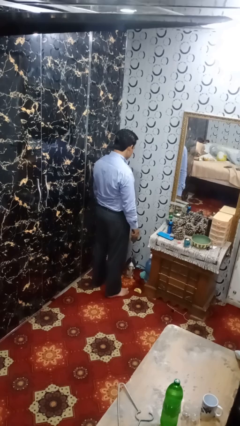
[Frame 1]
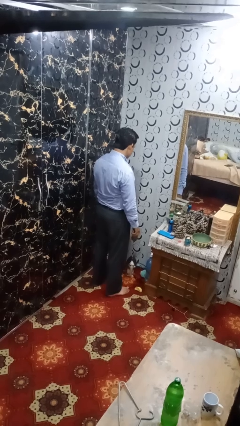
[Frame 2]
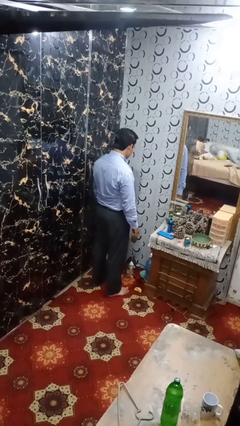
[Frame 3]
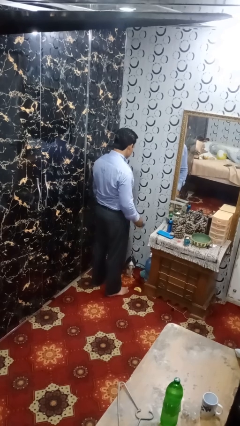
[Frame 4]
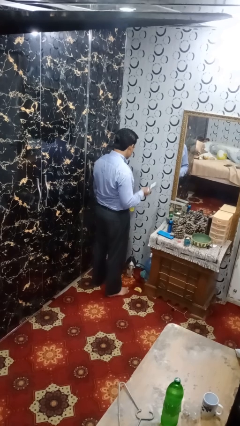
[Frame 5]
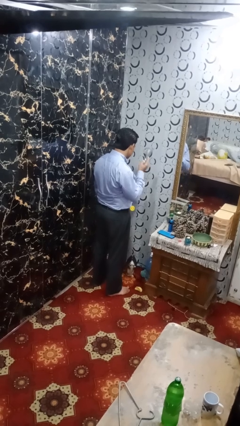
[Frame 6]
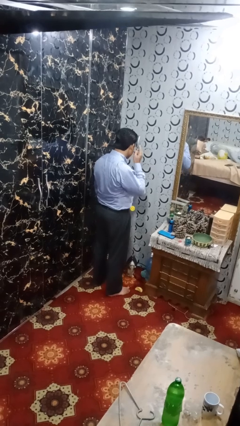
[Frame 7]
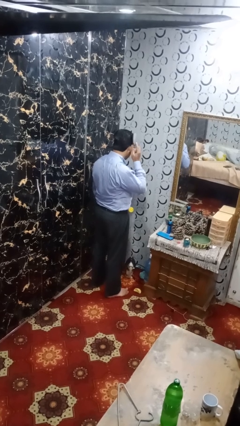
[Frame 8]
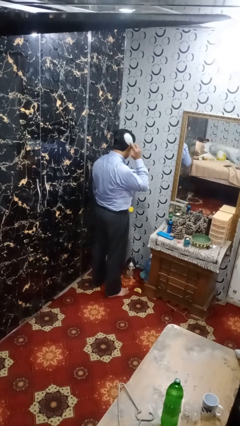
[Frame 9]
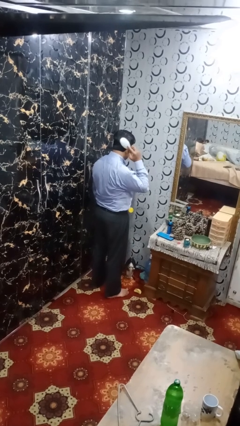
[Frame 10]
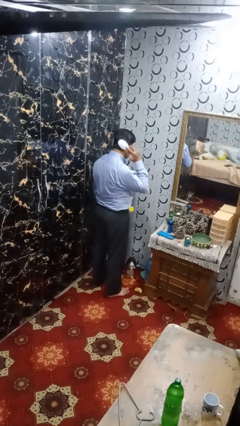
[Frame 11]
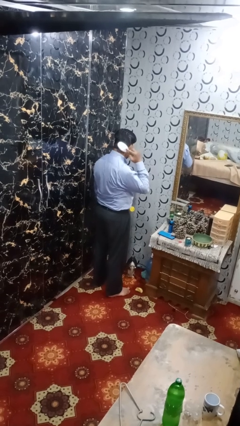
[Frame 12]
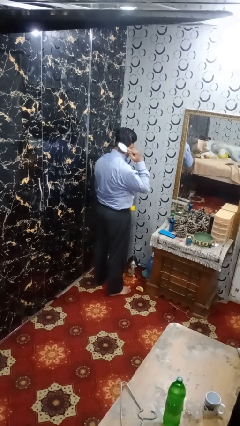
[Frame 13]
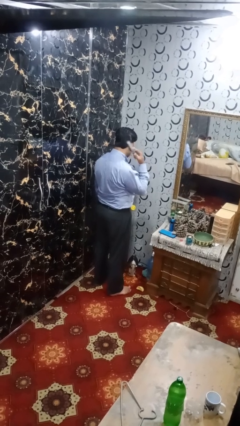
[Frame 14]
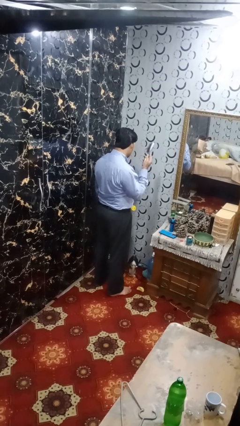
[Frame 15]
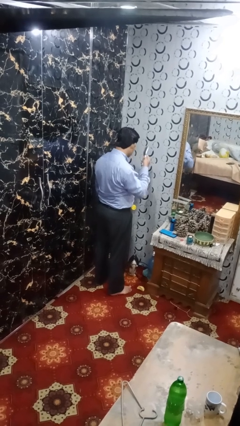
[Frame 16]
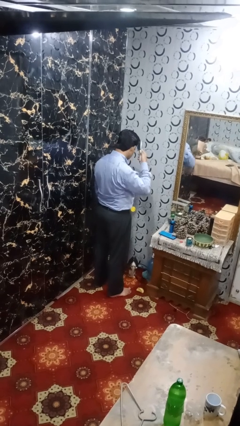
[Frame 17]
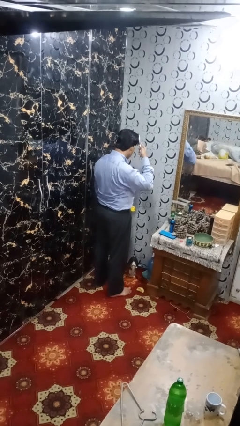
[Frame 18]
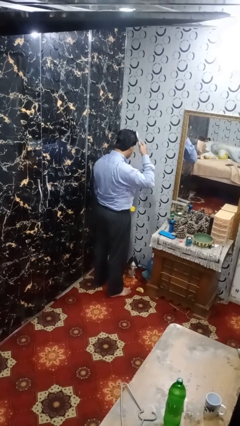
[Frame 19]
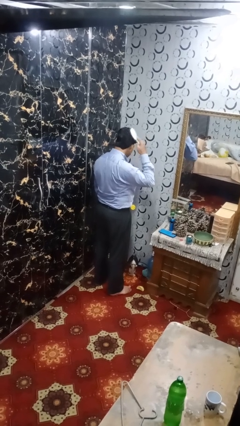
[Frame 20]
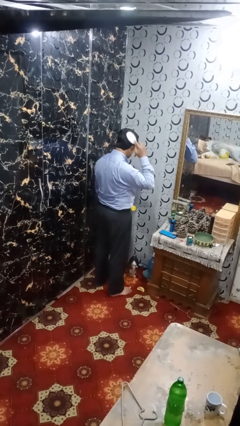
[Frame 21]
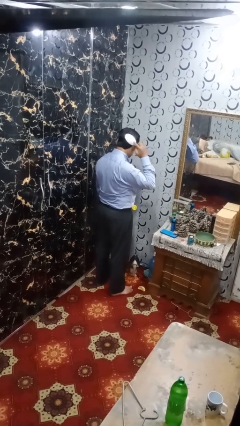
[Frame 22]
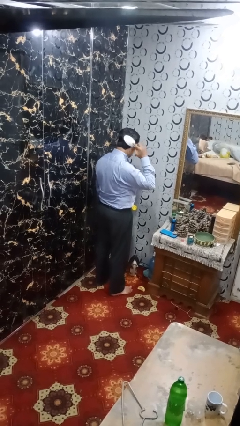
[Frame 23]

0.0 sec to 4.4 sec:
person brushes hair

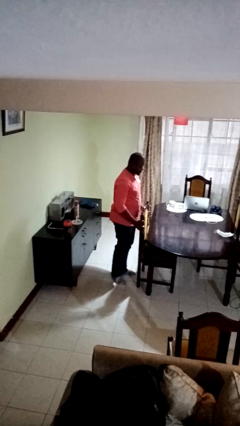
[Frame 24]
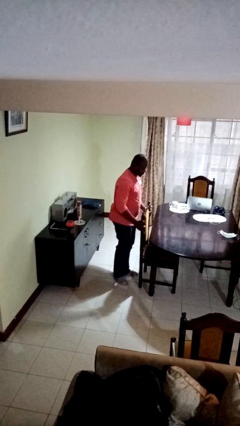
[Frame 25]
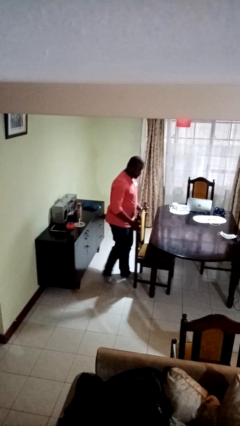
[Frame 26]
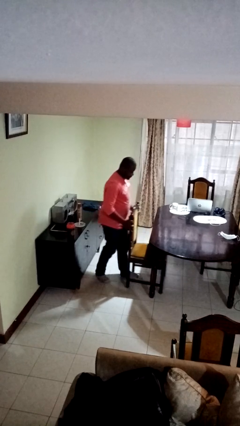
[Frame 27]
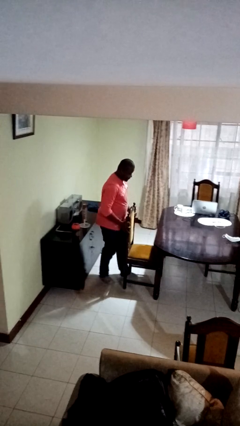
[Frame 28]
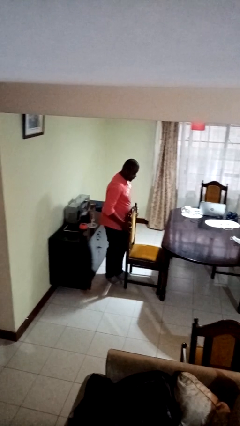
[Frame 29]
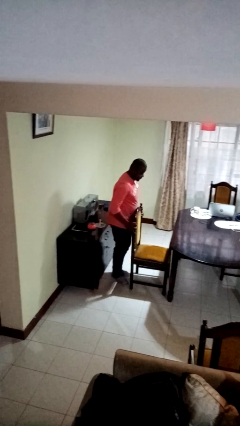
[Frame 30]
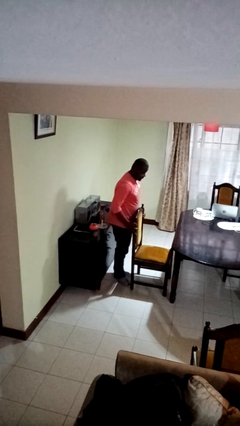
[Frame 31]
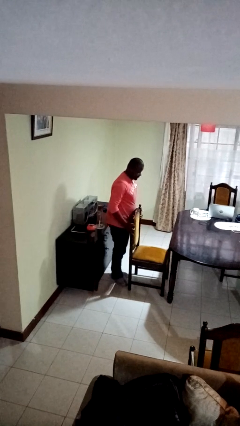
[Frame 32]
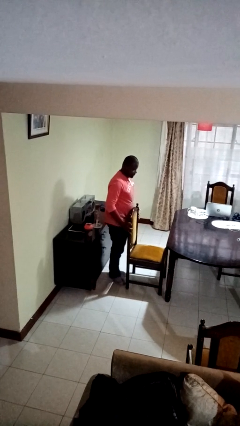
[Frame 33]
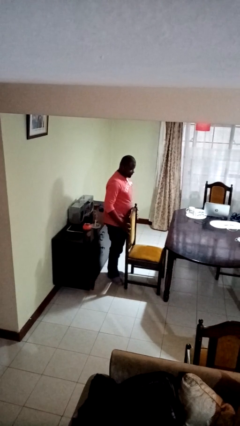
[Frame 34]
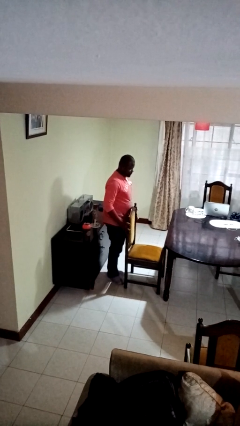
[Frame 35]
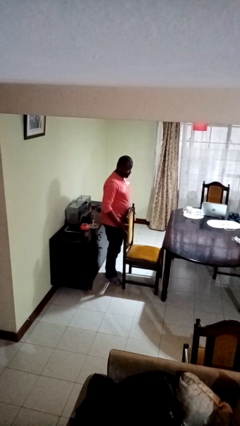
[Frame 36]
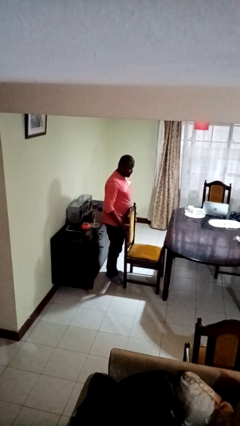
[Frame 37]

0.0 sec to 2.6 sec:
person pulls out chair

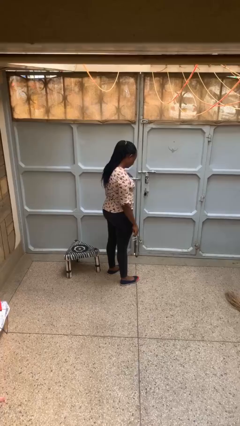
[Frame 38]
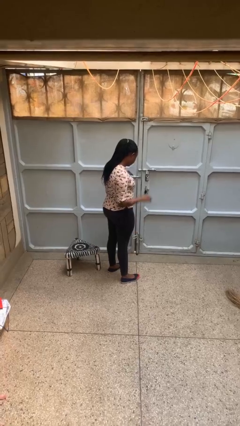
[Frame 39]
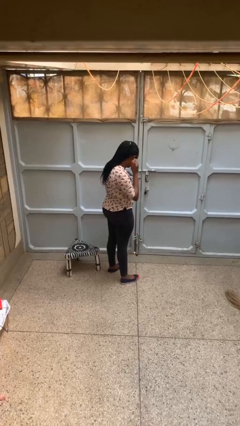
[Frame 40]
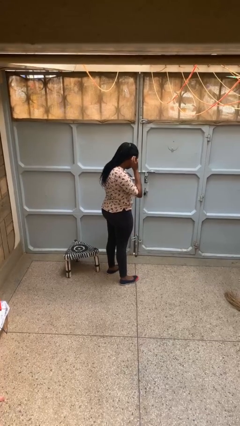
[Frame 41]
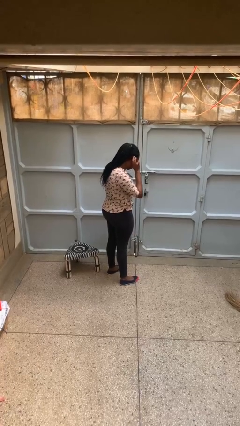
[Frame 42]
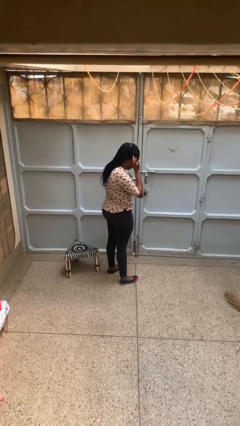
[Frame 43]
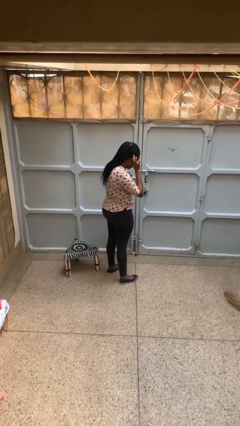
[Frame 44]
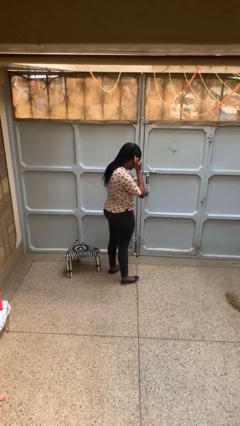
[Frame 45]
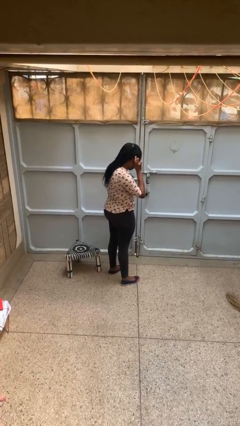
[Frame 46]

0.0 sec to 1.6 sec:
person gestures listen closely

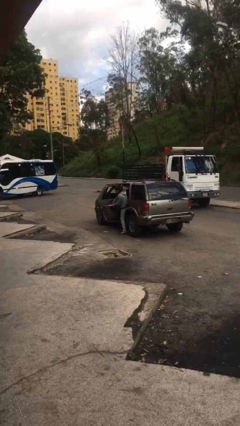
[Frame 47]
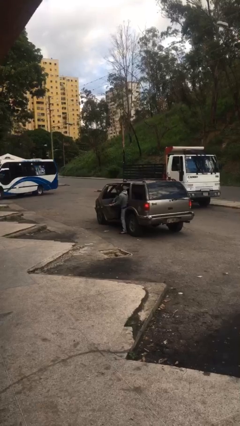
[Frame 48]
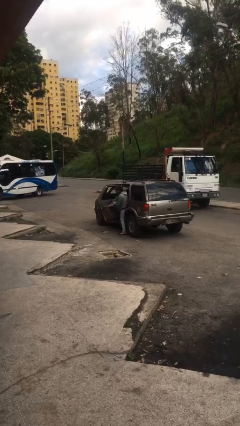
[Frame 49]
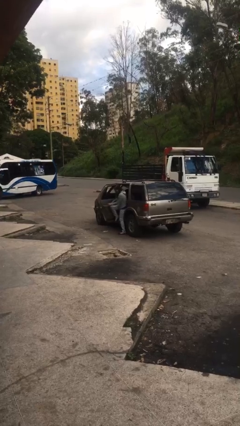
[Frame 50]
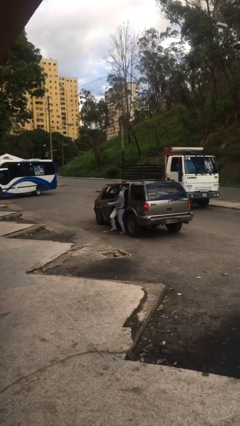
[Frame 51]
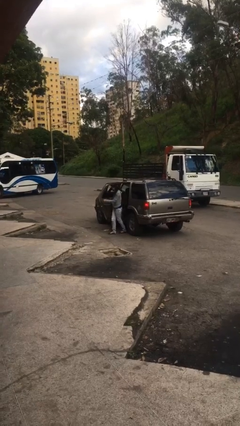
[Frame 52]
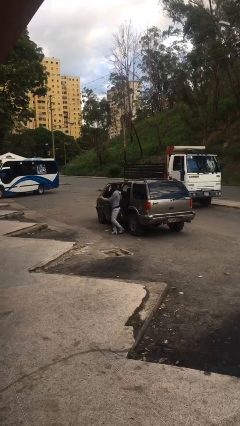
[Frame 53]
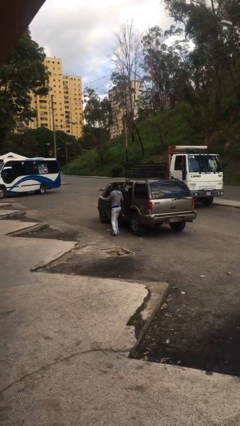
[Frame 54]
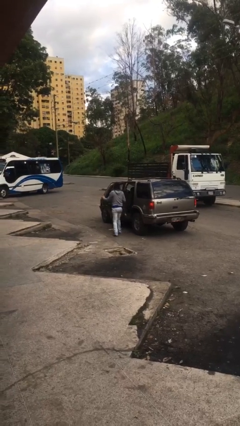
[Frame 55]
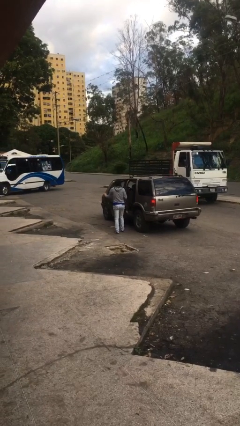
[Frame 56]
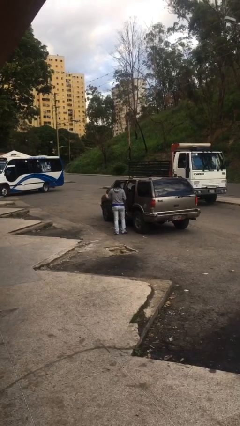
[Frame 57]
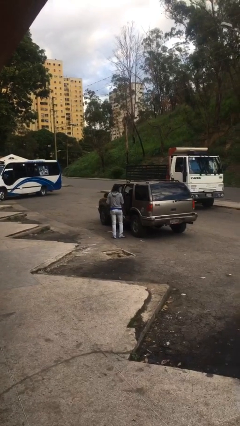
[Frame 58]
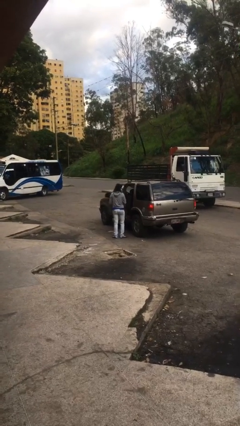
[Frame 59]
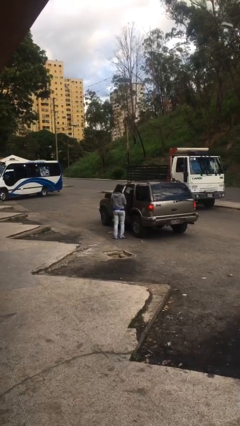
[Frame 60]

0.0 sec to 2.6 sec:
person exits car

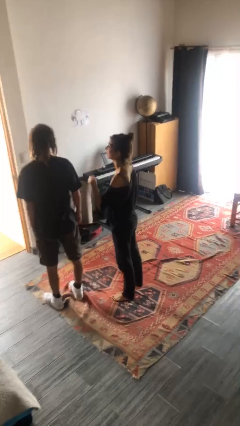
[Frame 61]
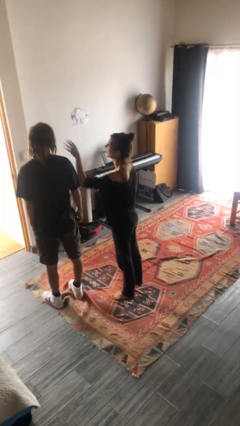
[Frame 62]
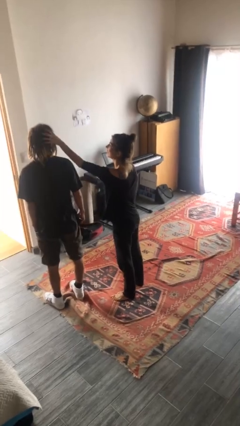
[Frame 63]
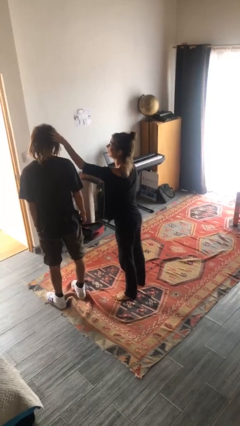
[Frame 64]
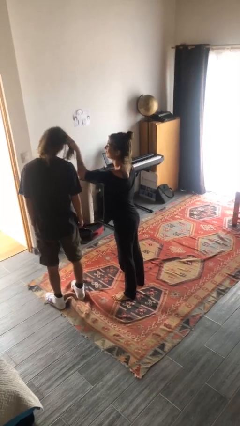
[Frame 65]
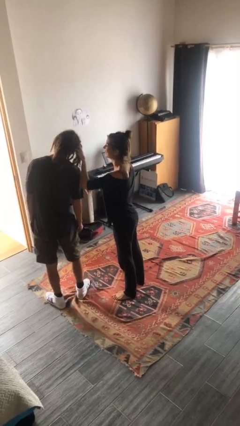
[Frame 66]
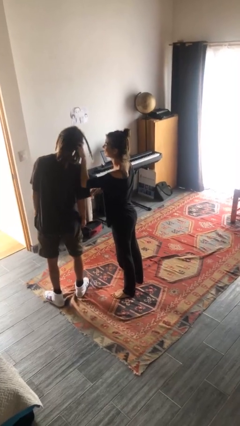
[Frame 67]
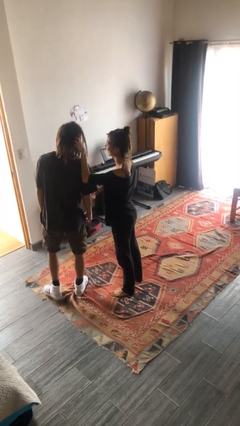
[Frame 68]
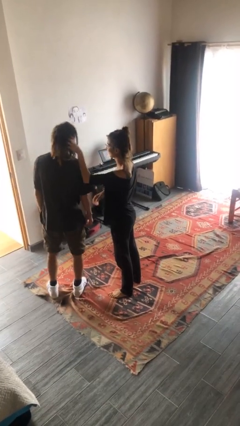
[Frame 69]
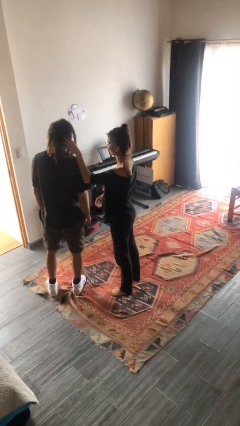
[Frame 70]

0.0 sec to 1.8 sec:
person grabs person by hair

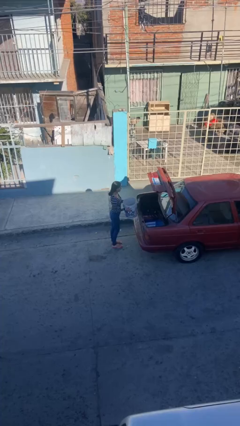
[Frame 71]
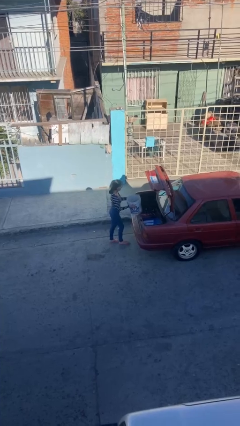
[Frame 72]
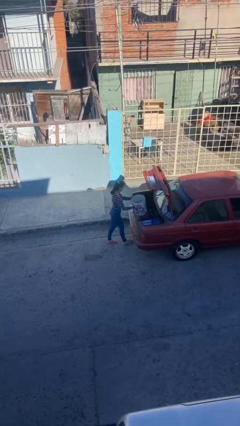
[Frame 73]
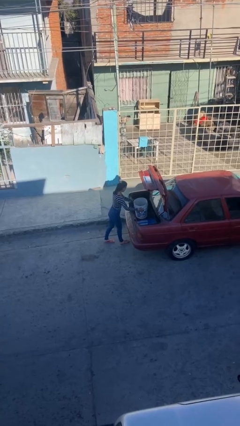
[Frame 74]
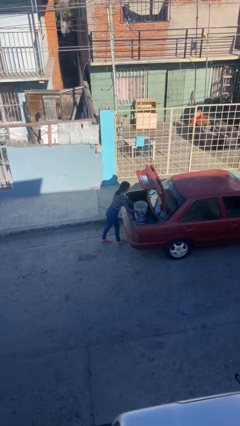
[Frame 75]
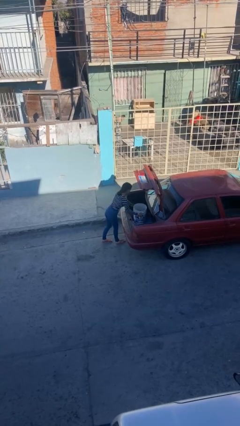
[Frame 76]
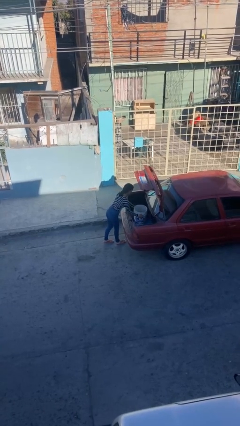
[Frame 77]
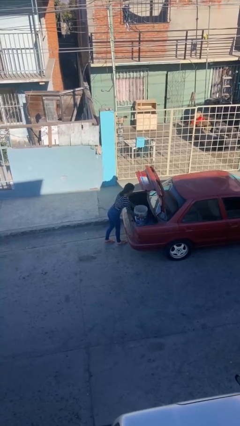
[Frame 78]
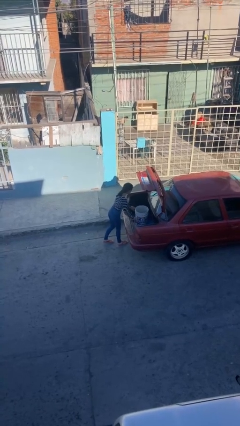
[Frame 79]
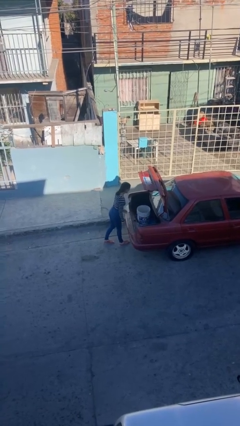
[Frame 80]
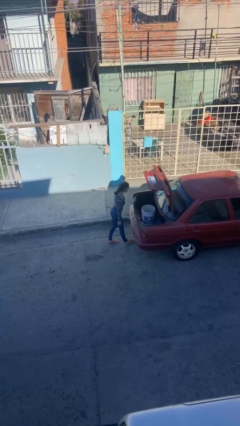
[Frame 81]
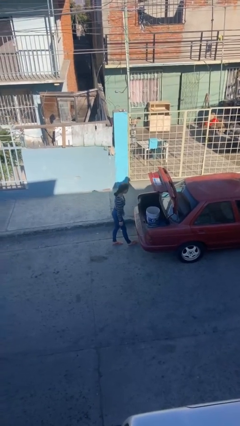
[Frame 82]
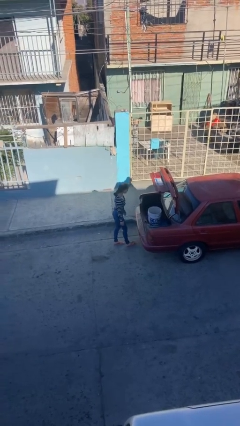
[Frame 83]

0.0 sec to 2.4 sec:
person loads car

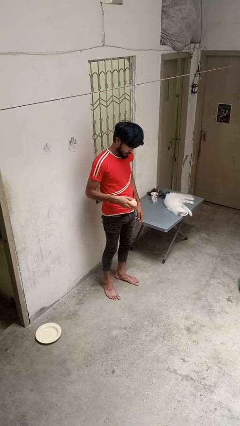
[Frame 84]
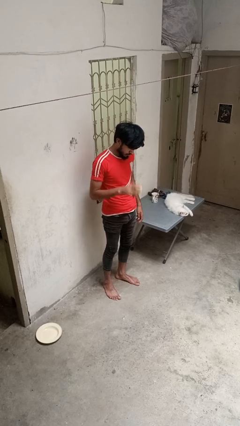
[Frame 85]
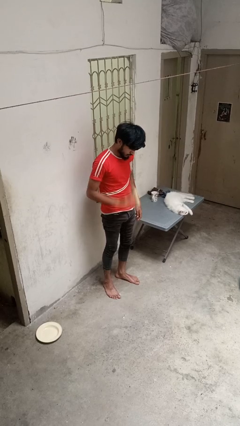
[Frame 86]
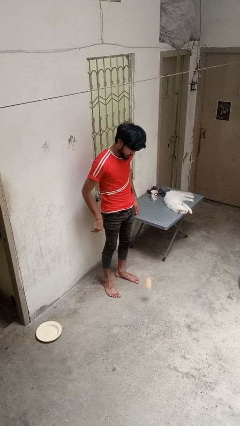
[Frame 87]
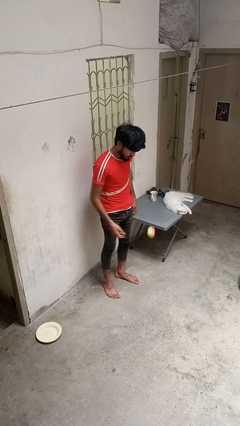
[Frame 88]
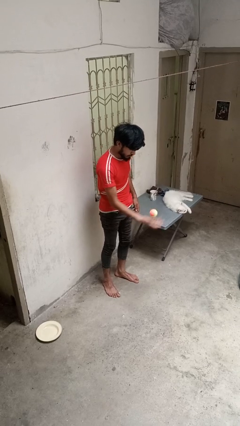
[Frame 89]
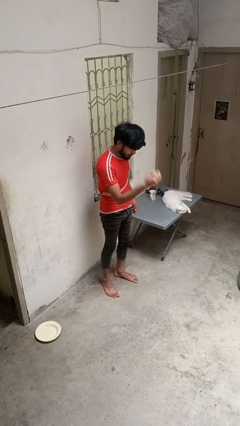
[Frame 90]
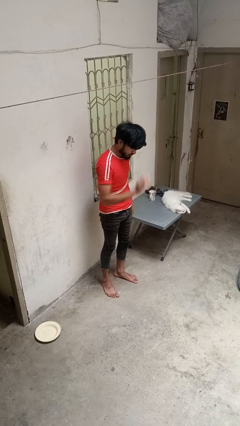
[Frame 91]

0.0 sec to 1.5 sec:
person bounces ball on floor

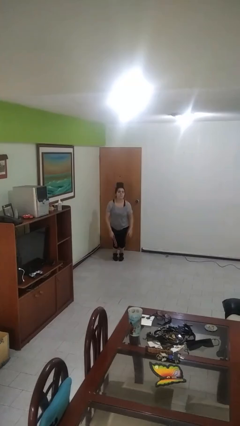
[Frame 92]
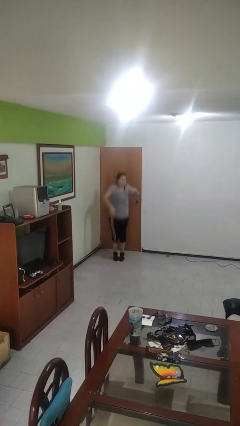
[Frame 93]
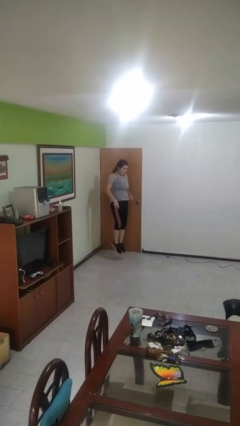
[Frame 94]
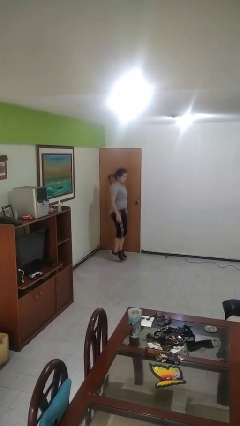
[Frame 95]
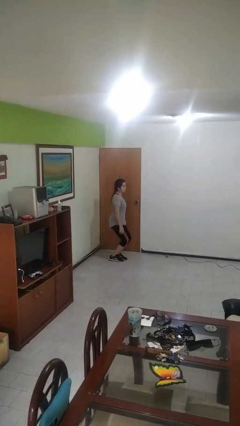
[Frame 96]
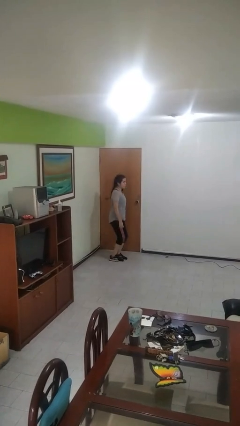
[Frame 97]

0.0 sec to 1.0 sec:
person jumps
